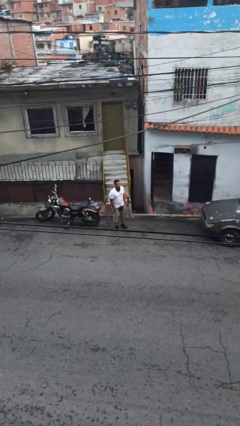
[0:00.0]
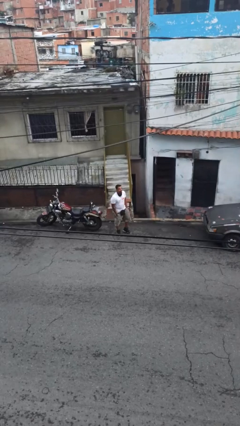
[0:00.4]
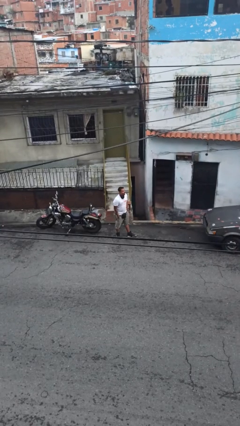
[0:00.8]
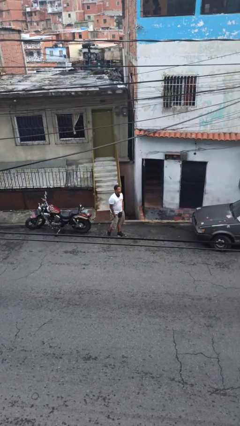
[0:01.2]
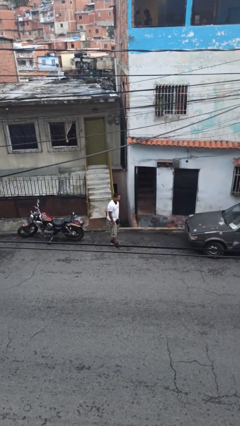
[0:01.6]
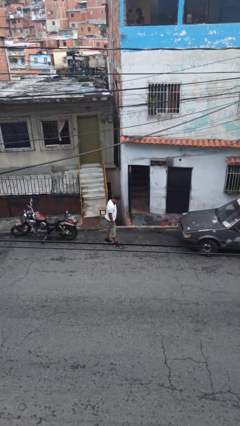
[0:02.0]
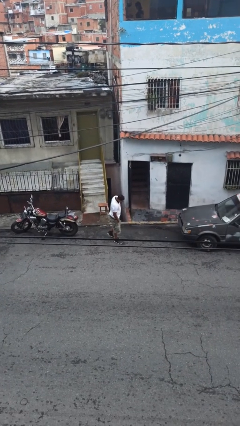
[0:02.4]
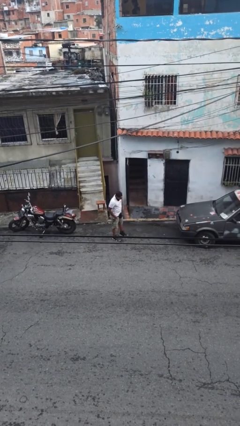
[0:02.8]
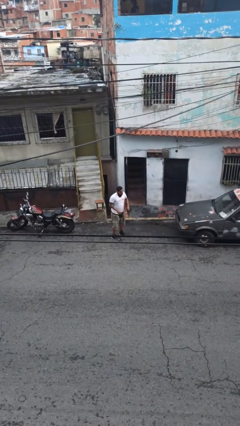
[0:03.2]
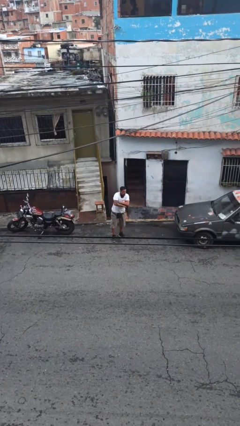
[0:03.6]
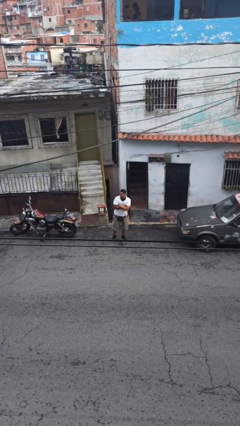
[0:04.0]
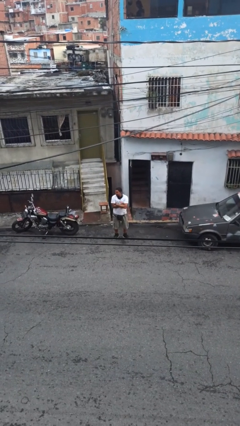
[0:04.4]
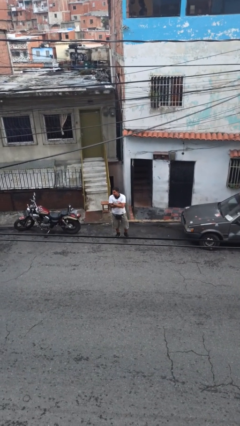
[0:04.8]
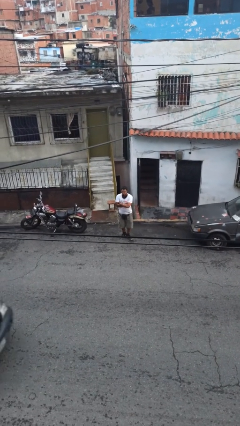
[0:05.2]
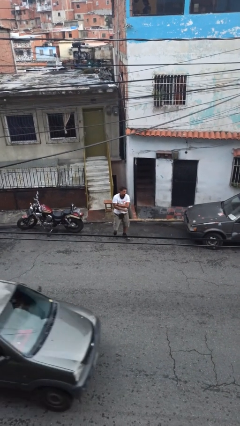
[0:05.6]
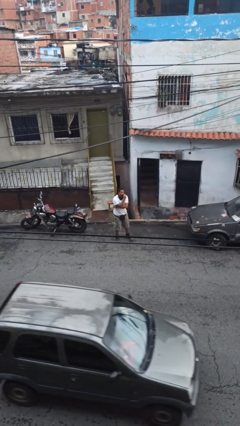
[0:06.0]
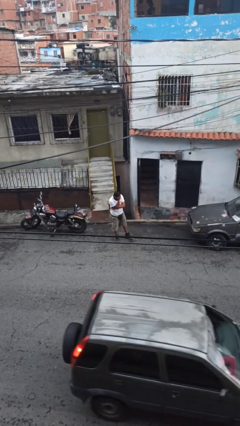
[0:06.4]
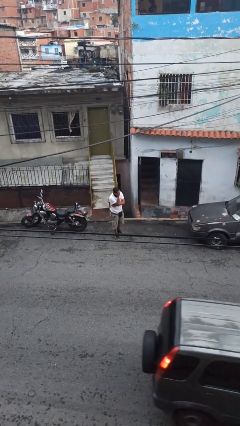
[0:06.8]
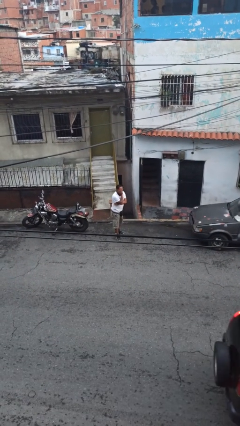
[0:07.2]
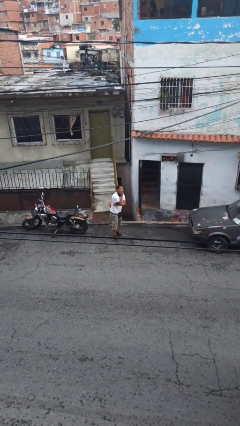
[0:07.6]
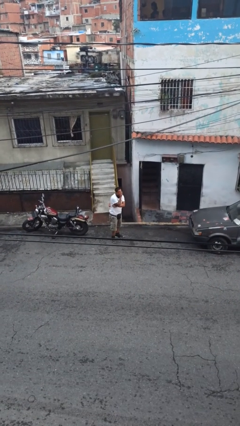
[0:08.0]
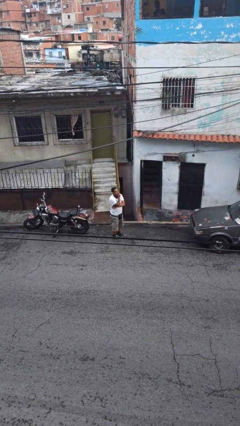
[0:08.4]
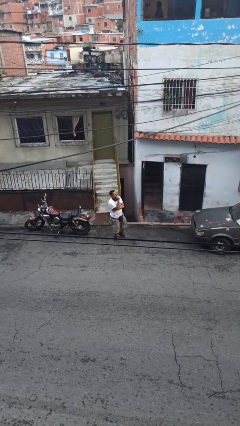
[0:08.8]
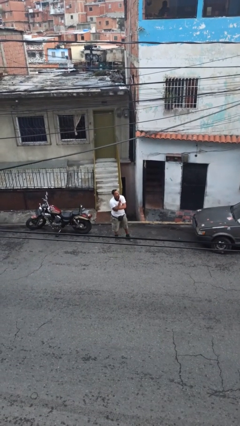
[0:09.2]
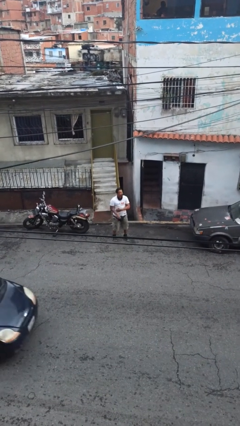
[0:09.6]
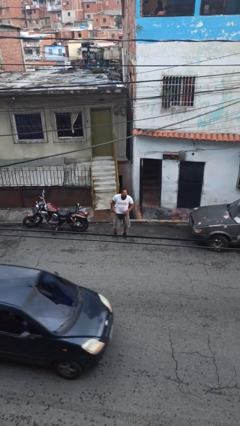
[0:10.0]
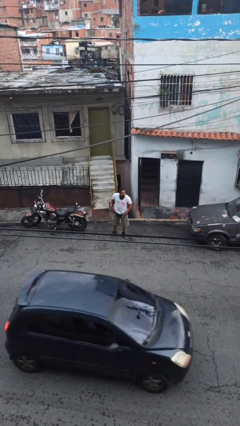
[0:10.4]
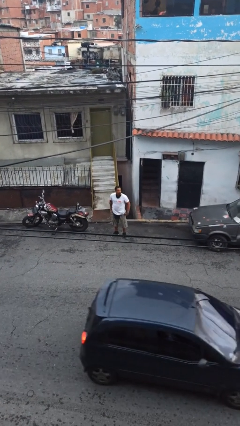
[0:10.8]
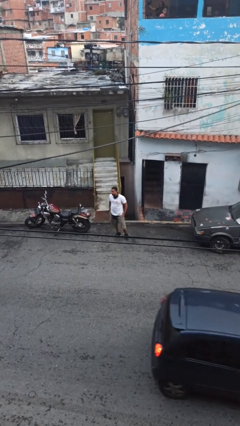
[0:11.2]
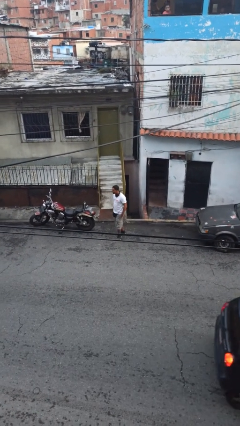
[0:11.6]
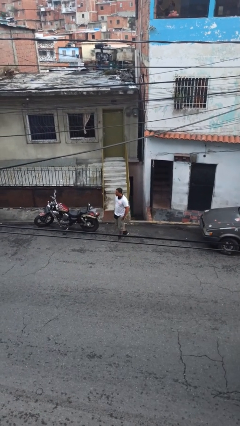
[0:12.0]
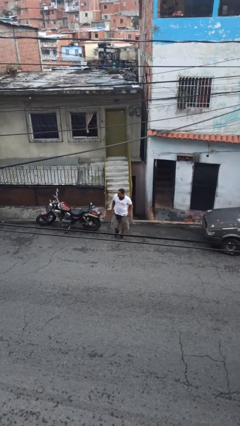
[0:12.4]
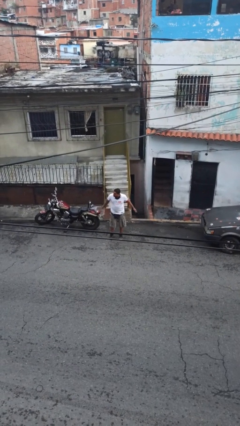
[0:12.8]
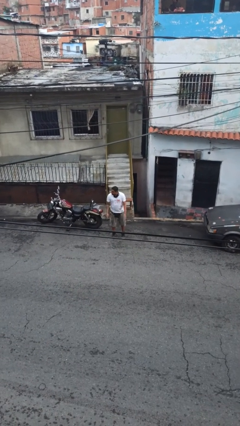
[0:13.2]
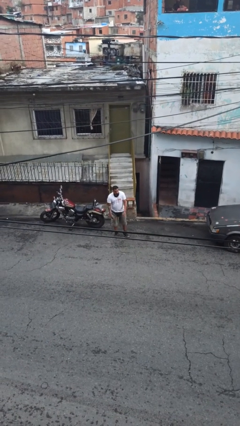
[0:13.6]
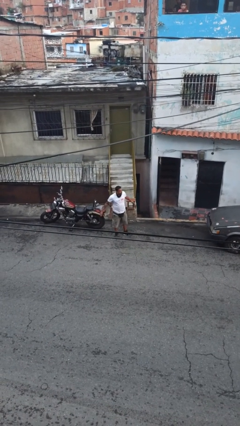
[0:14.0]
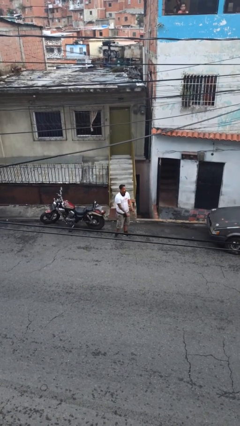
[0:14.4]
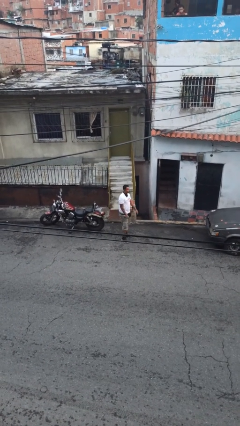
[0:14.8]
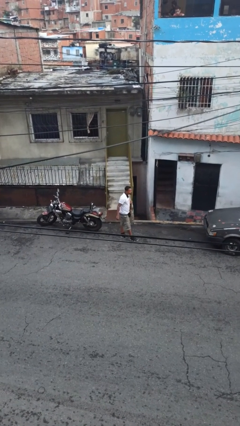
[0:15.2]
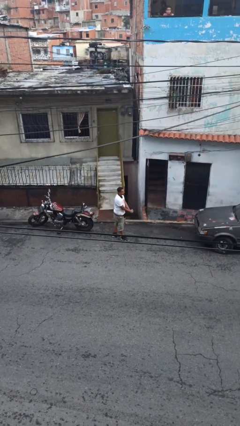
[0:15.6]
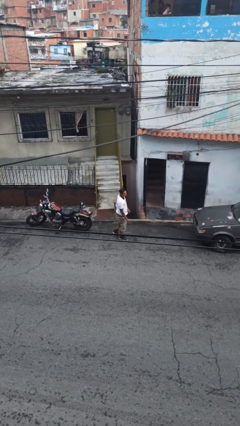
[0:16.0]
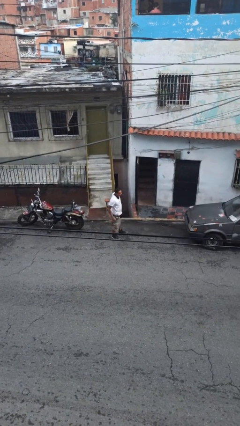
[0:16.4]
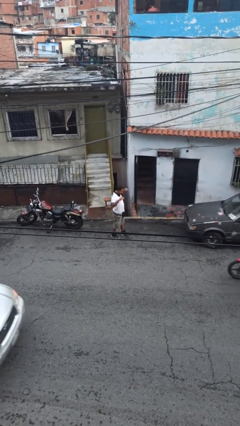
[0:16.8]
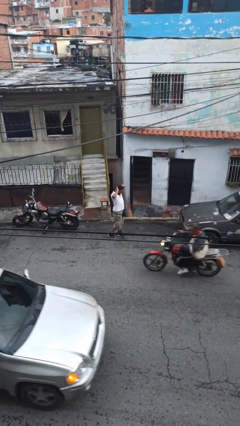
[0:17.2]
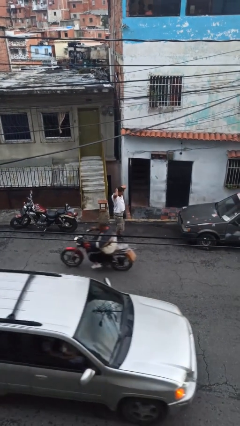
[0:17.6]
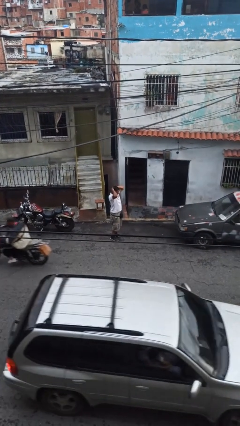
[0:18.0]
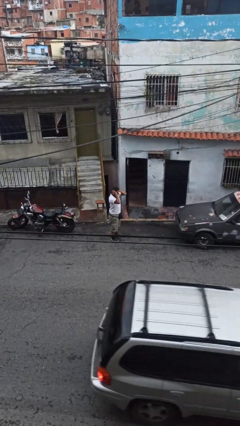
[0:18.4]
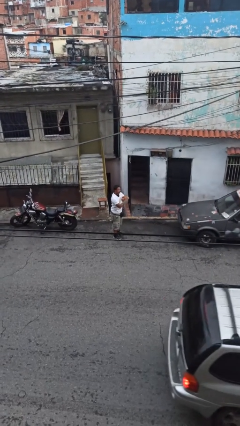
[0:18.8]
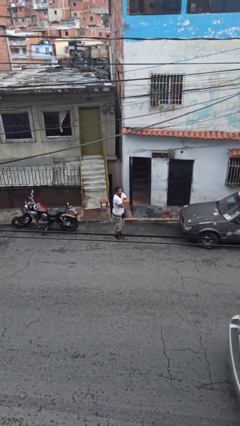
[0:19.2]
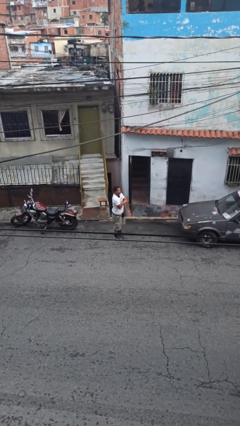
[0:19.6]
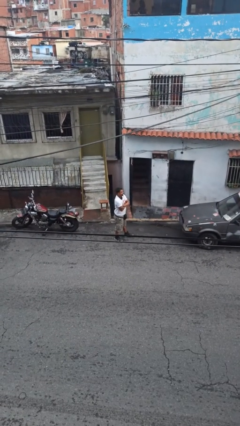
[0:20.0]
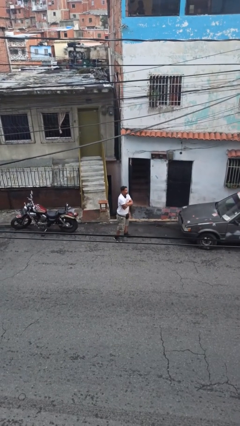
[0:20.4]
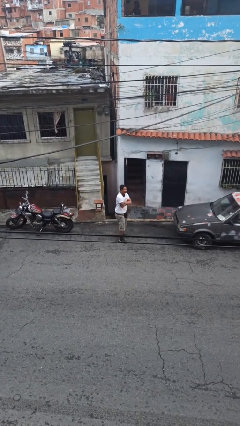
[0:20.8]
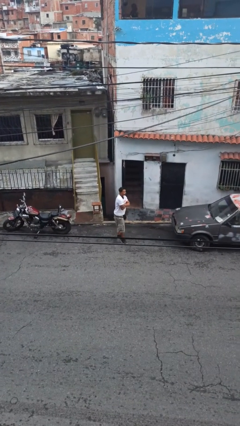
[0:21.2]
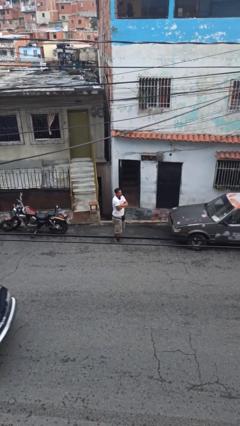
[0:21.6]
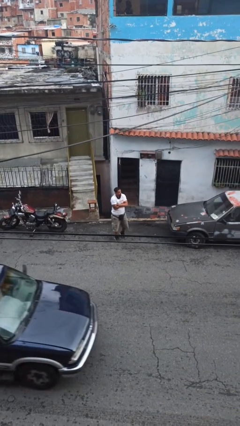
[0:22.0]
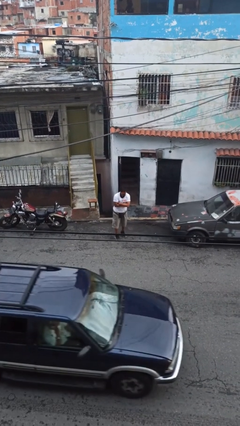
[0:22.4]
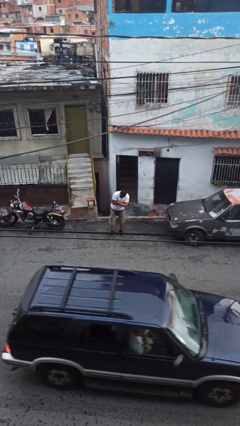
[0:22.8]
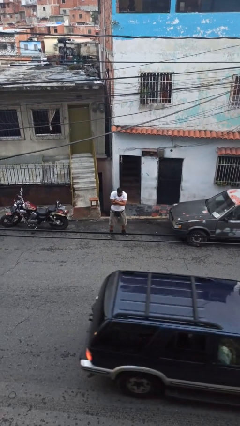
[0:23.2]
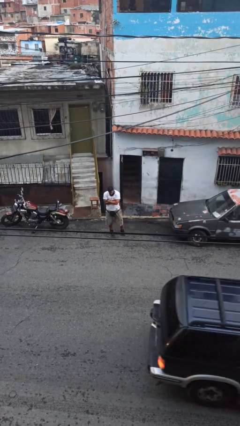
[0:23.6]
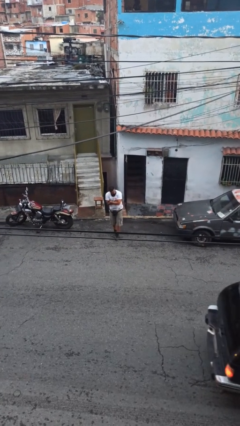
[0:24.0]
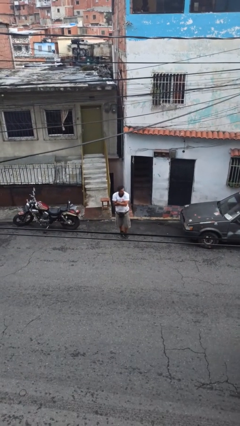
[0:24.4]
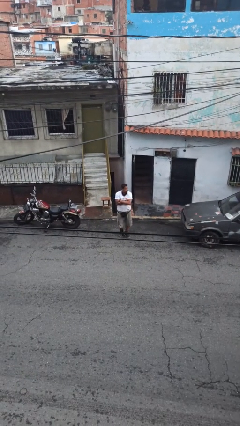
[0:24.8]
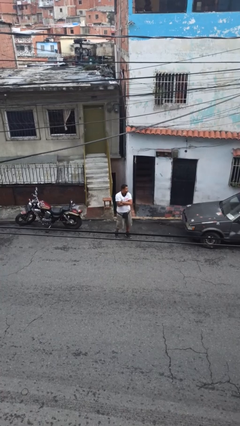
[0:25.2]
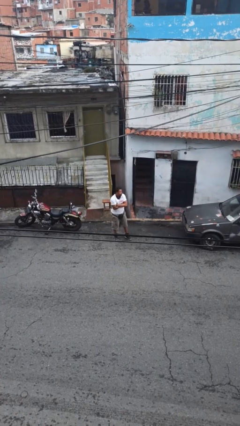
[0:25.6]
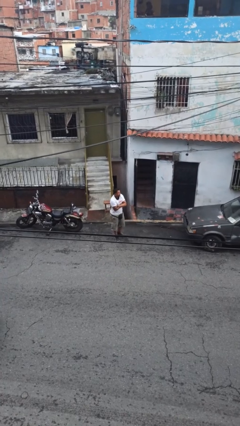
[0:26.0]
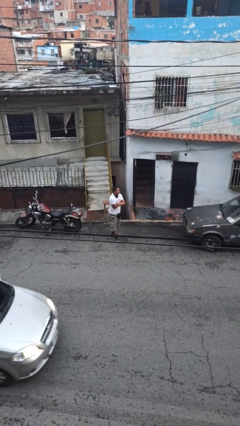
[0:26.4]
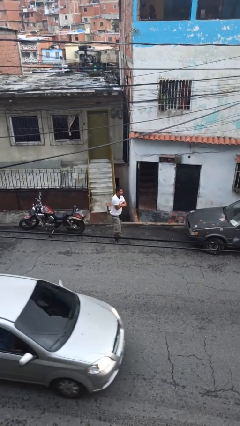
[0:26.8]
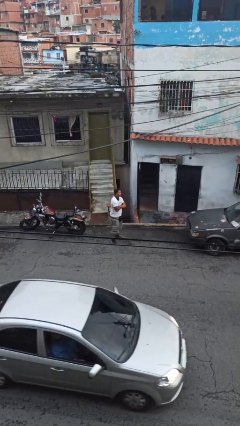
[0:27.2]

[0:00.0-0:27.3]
person walks

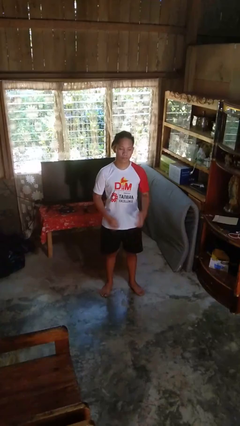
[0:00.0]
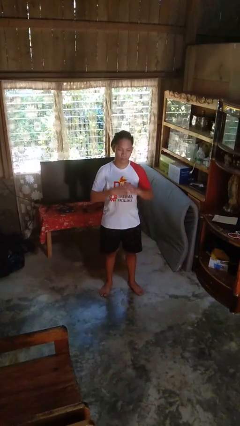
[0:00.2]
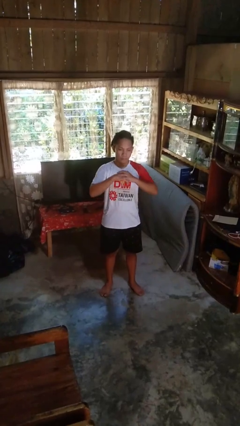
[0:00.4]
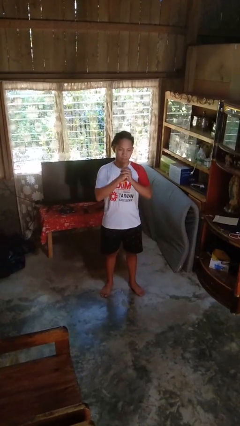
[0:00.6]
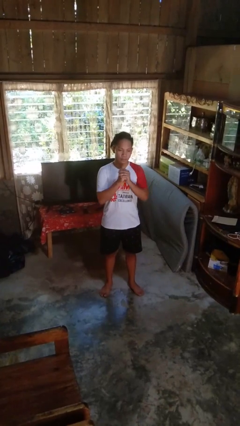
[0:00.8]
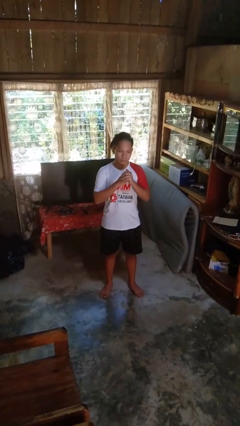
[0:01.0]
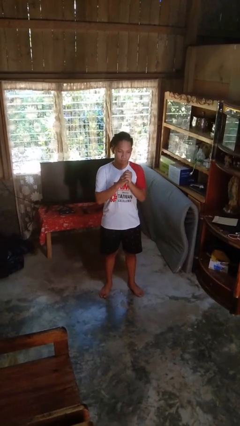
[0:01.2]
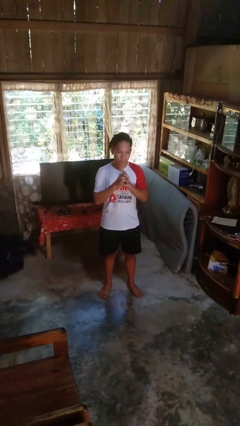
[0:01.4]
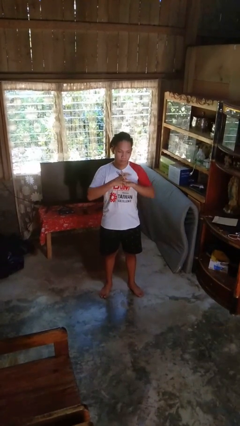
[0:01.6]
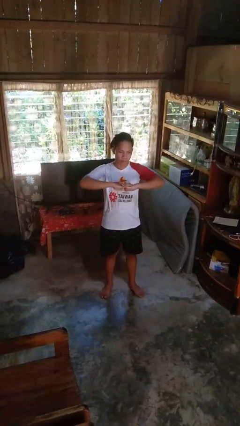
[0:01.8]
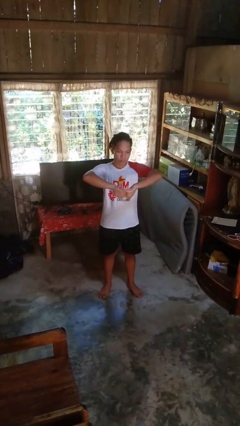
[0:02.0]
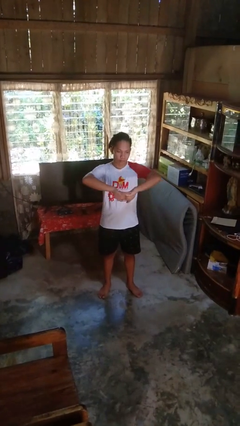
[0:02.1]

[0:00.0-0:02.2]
person cracks knuckles

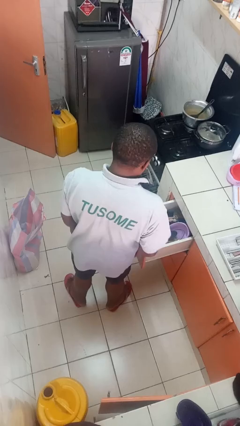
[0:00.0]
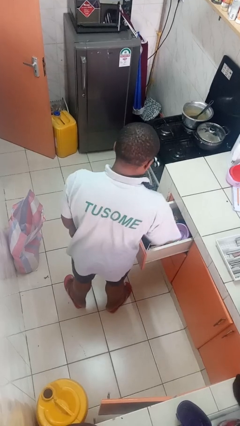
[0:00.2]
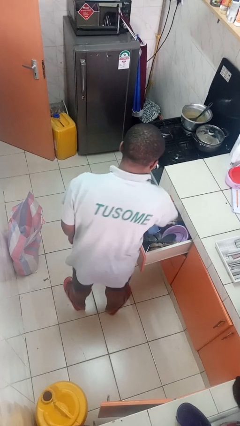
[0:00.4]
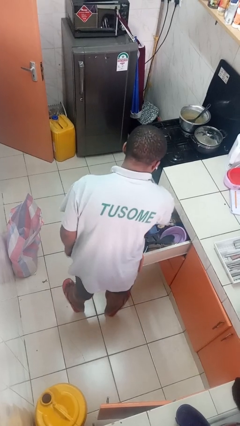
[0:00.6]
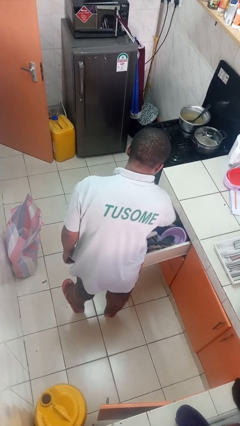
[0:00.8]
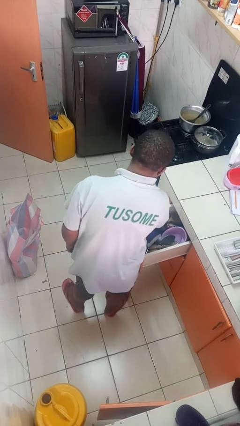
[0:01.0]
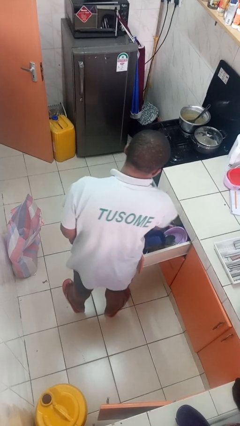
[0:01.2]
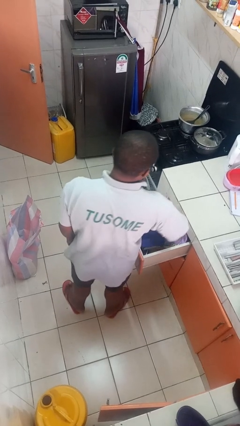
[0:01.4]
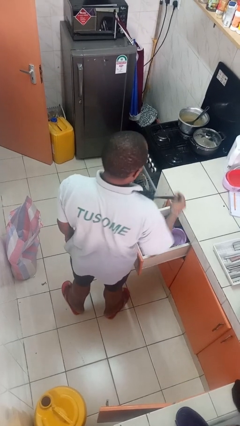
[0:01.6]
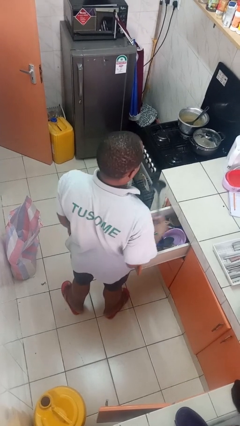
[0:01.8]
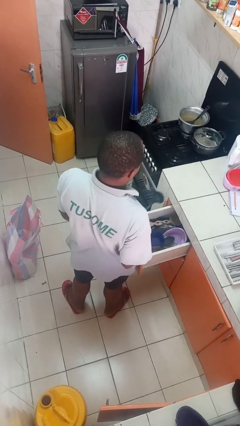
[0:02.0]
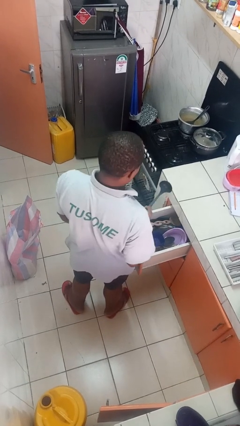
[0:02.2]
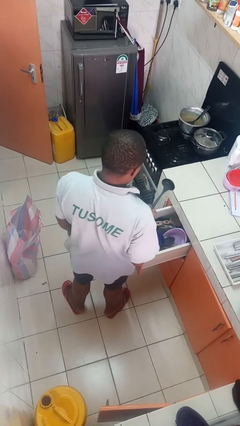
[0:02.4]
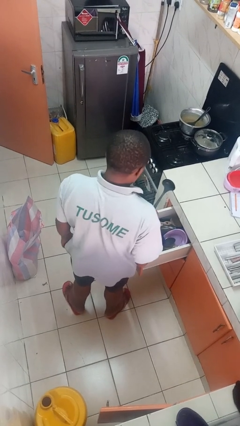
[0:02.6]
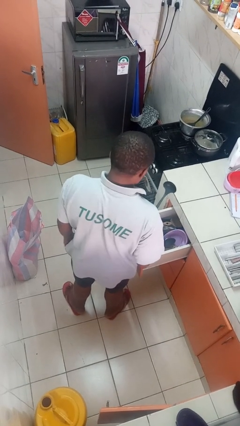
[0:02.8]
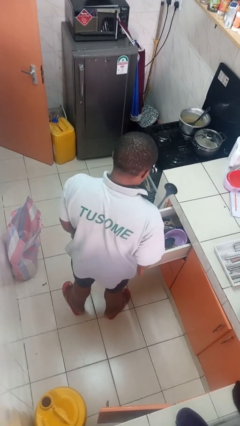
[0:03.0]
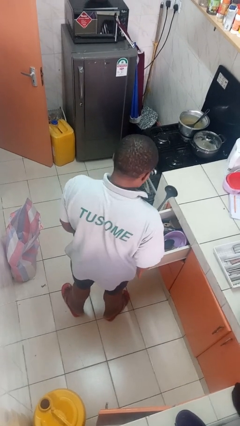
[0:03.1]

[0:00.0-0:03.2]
person takes object from kitchen drawer
